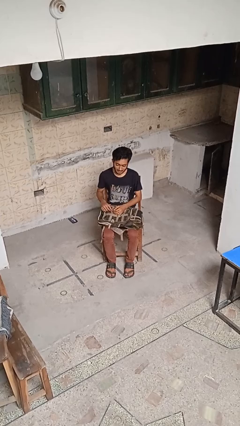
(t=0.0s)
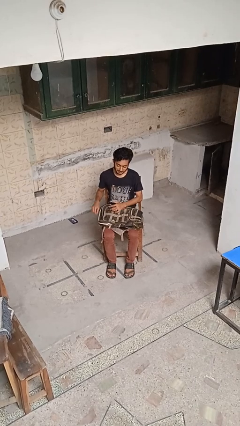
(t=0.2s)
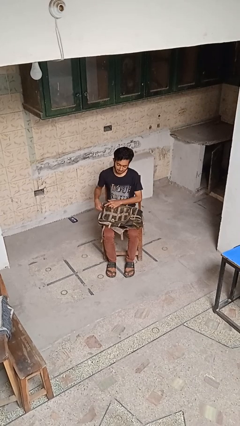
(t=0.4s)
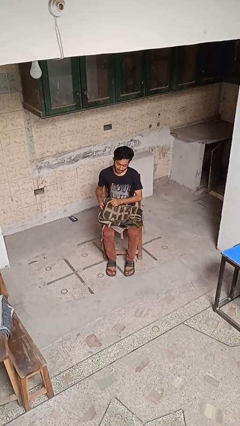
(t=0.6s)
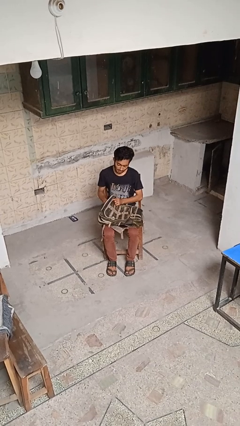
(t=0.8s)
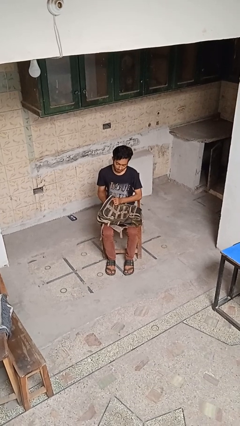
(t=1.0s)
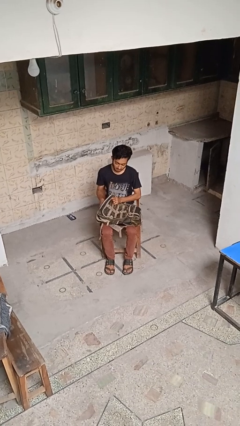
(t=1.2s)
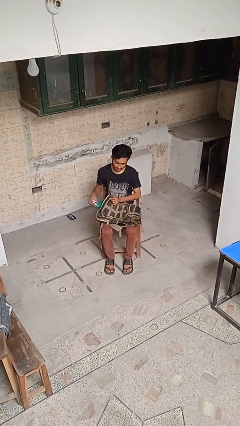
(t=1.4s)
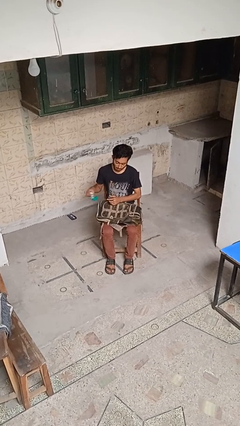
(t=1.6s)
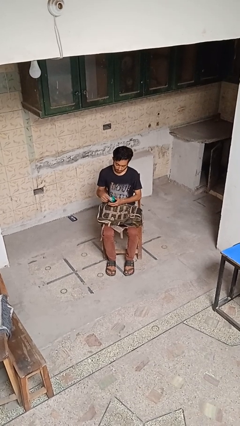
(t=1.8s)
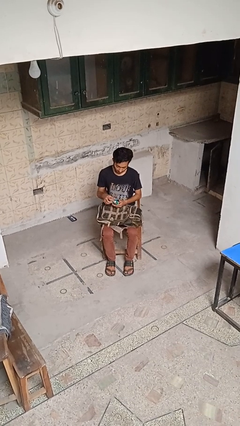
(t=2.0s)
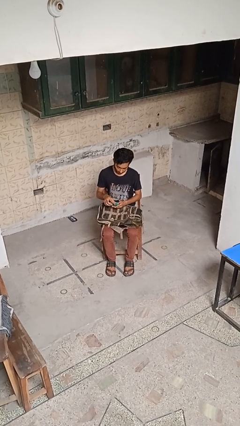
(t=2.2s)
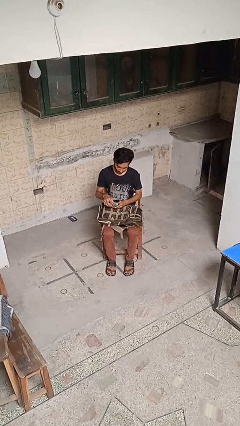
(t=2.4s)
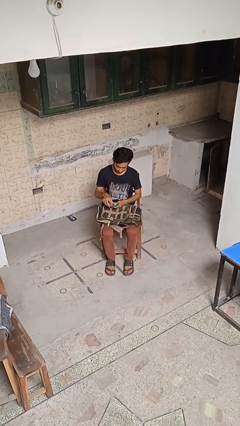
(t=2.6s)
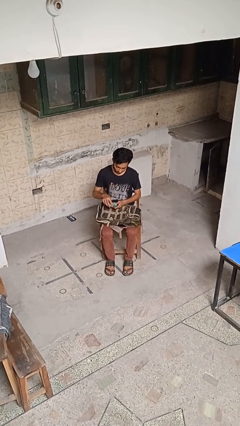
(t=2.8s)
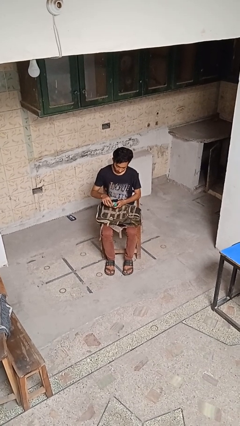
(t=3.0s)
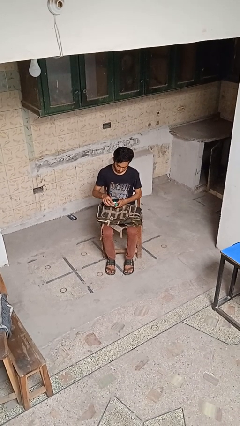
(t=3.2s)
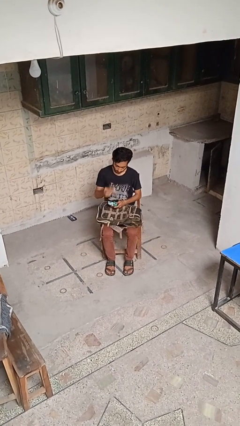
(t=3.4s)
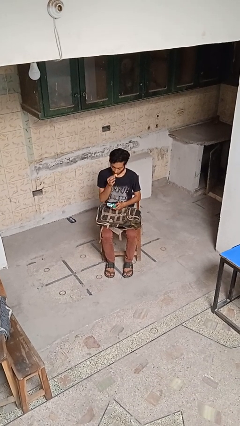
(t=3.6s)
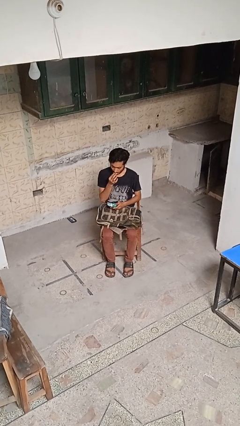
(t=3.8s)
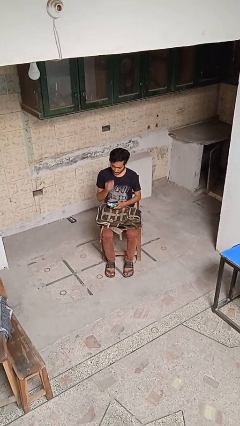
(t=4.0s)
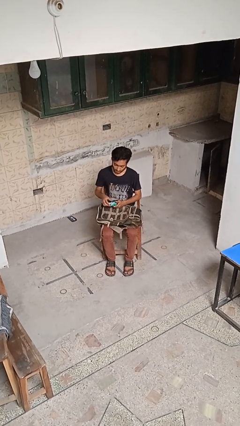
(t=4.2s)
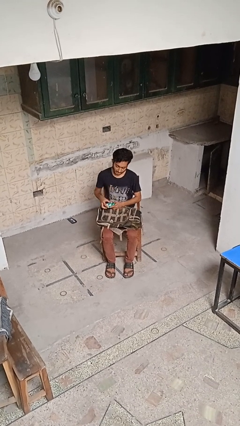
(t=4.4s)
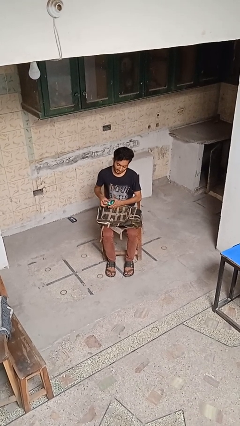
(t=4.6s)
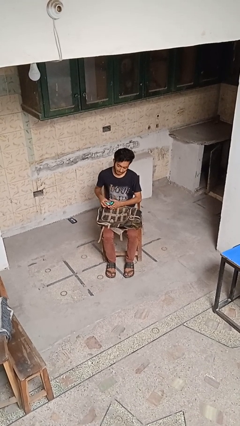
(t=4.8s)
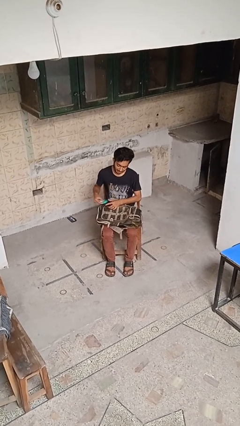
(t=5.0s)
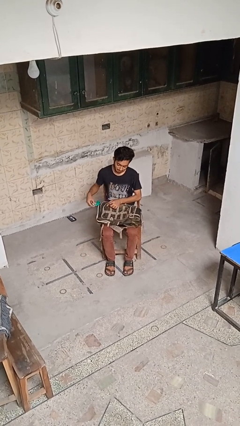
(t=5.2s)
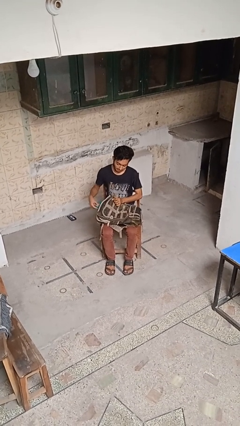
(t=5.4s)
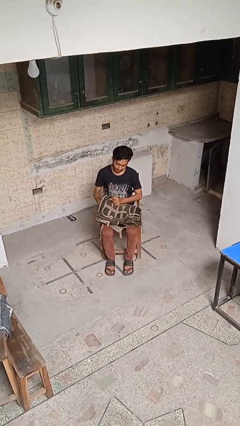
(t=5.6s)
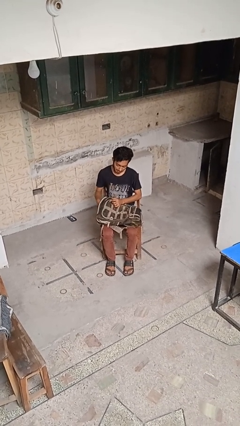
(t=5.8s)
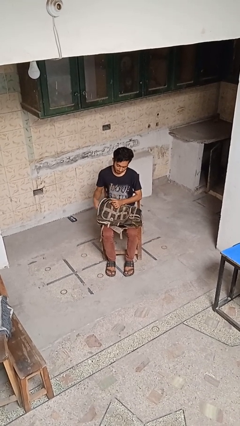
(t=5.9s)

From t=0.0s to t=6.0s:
person eats snack from bag

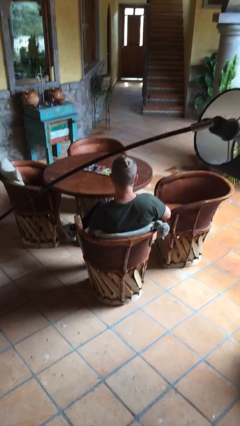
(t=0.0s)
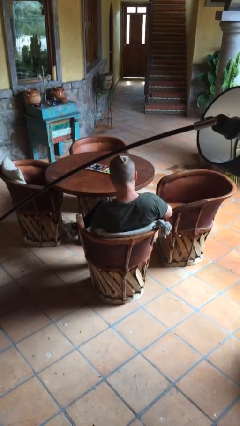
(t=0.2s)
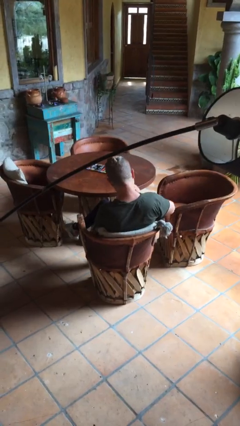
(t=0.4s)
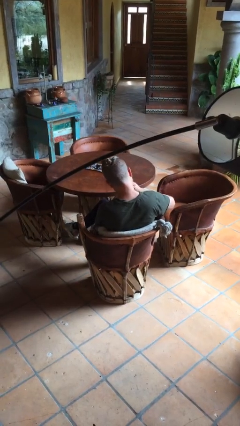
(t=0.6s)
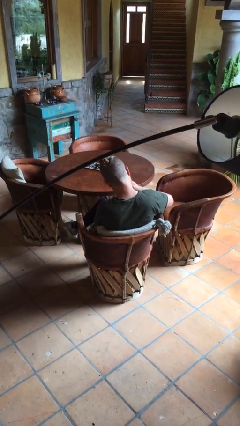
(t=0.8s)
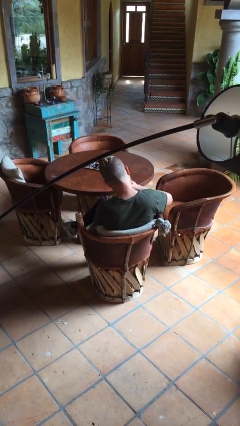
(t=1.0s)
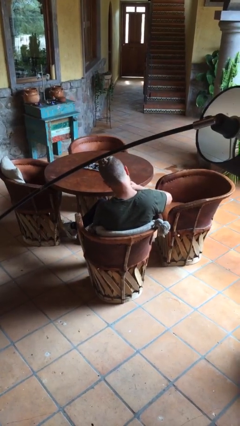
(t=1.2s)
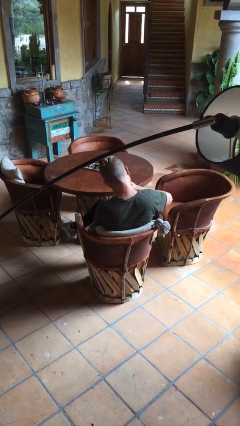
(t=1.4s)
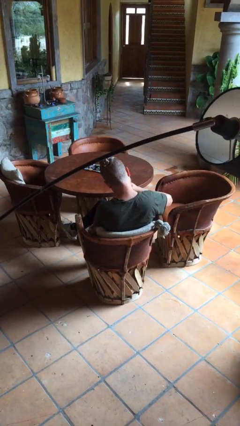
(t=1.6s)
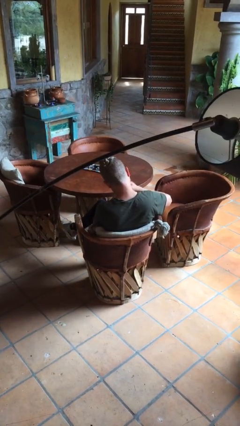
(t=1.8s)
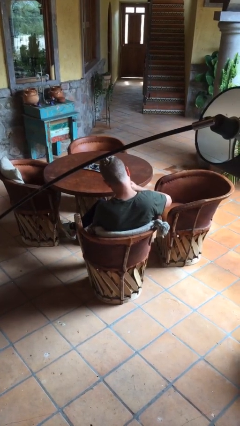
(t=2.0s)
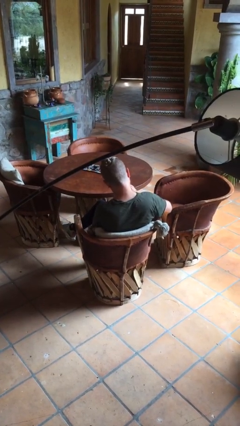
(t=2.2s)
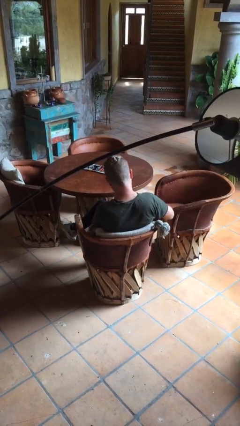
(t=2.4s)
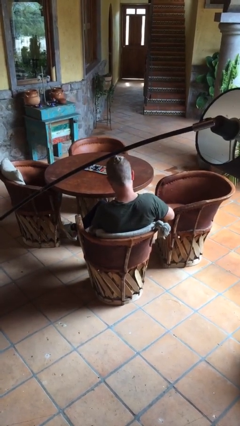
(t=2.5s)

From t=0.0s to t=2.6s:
person files fingernails

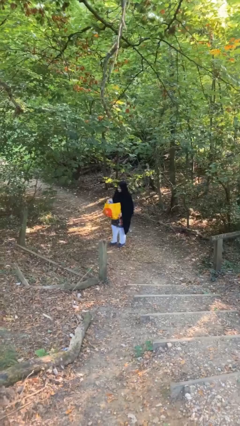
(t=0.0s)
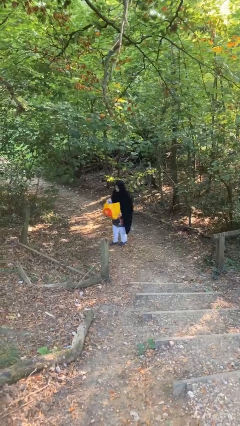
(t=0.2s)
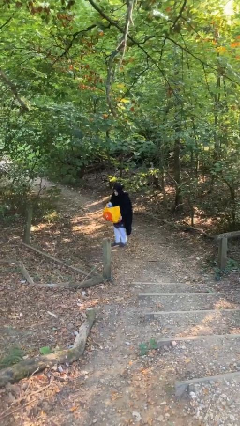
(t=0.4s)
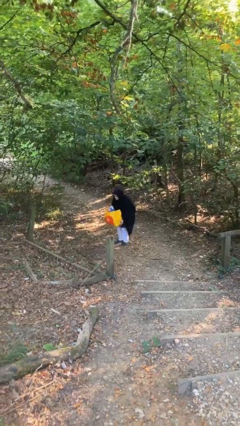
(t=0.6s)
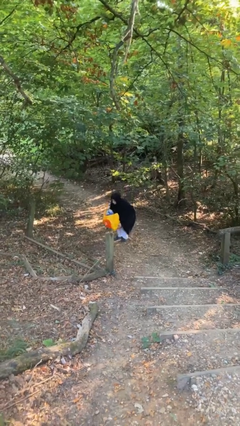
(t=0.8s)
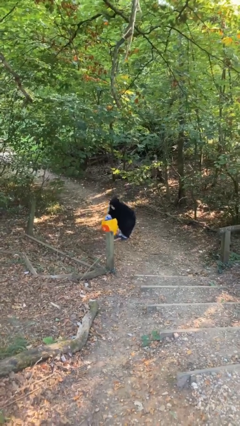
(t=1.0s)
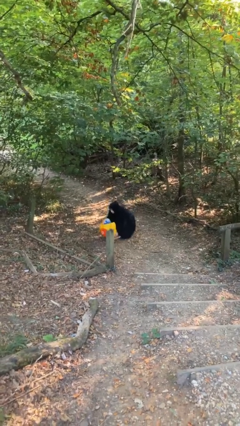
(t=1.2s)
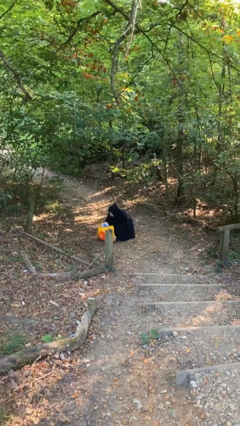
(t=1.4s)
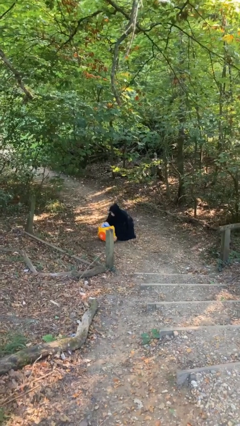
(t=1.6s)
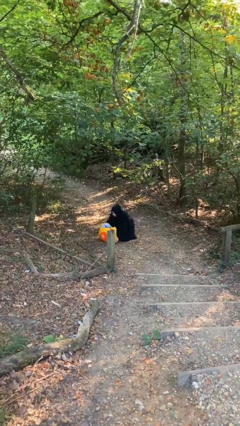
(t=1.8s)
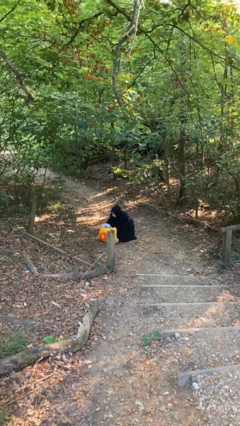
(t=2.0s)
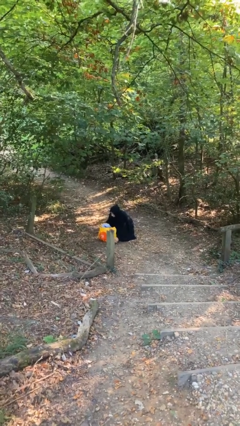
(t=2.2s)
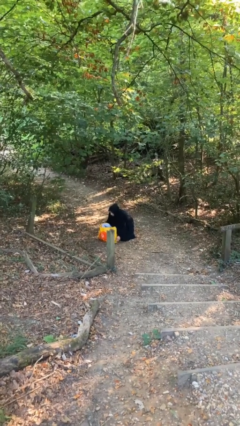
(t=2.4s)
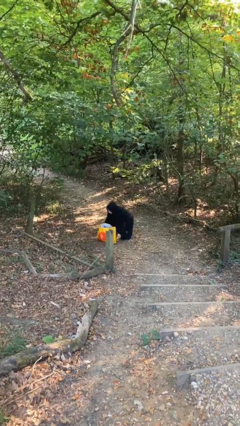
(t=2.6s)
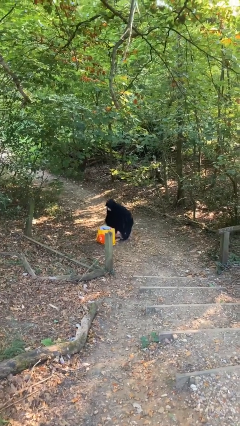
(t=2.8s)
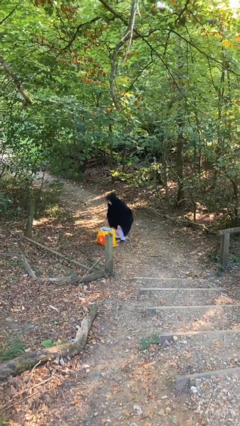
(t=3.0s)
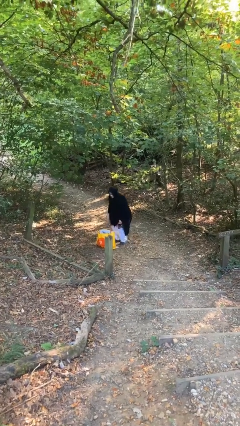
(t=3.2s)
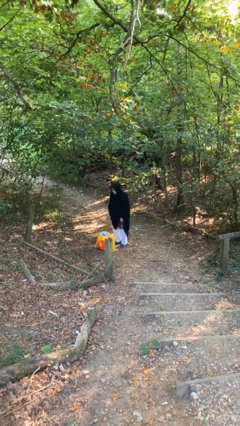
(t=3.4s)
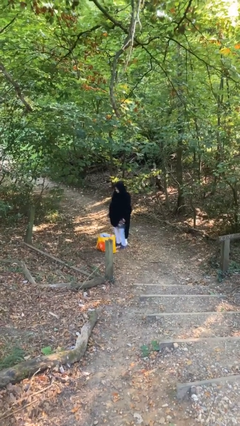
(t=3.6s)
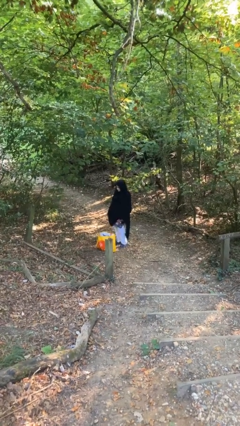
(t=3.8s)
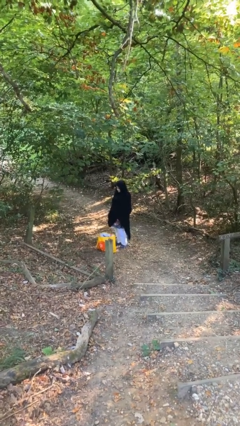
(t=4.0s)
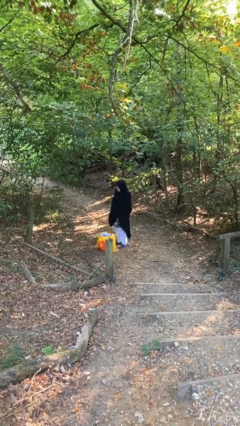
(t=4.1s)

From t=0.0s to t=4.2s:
person puts down object on floor

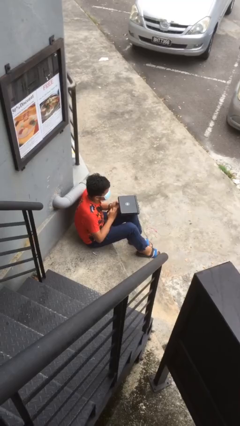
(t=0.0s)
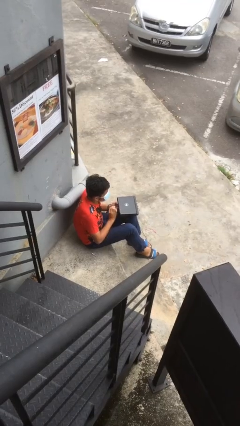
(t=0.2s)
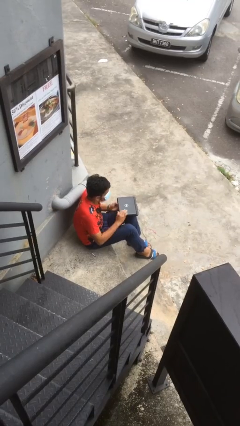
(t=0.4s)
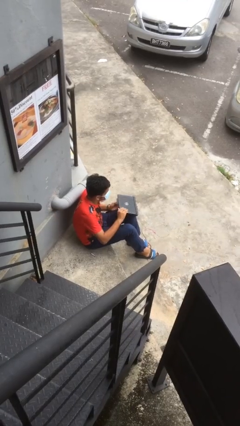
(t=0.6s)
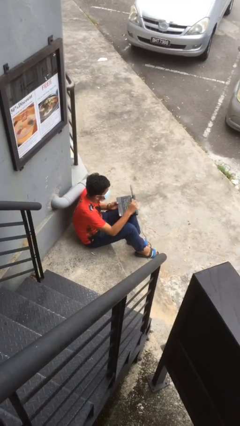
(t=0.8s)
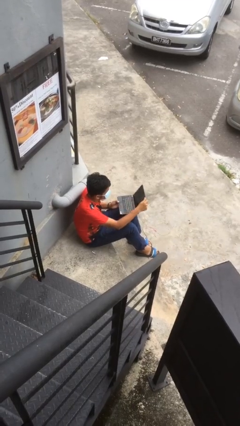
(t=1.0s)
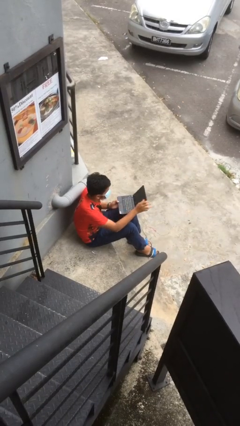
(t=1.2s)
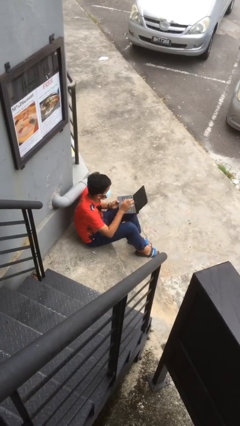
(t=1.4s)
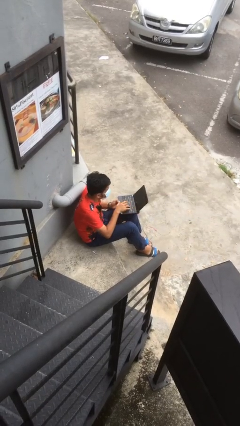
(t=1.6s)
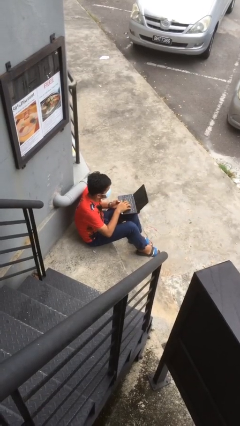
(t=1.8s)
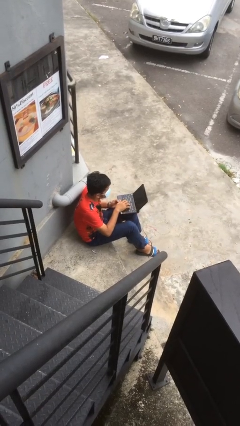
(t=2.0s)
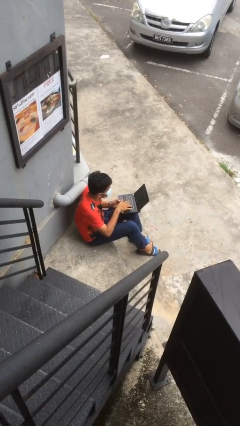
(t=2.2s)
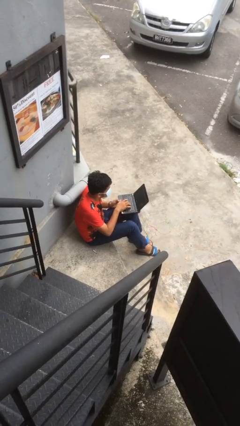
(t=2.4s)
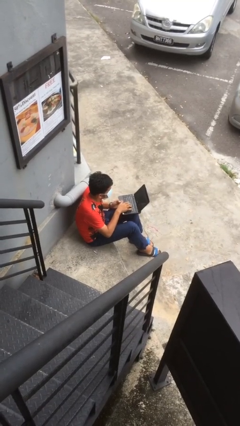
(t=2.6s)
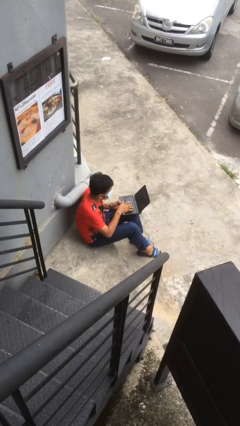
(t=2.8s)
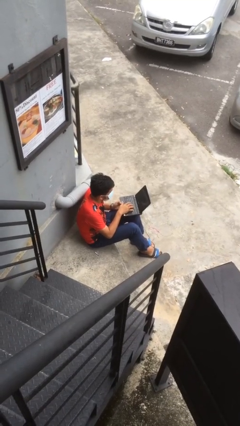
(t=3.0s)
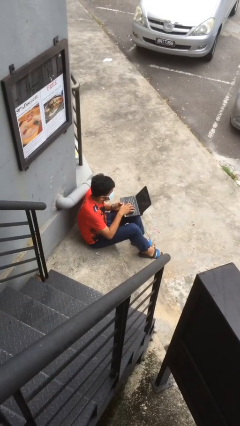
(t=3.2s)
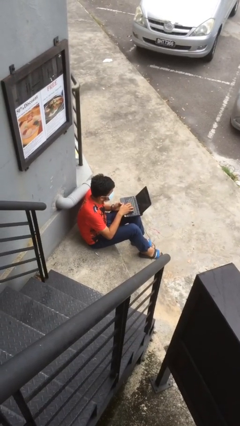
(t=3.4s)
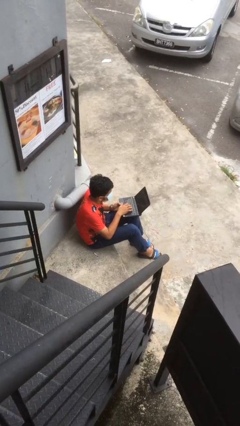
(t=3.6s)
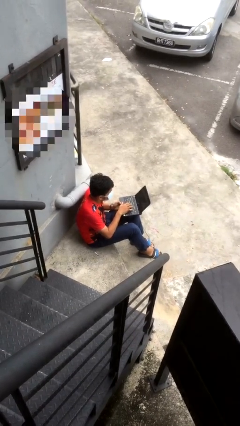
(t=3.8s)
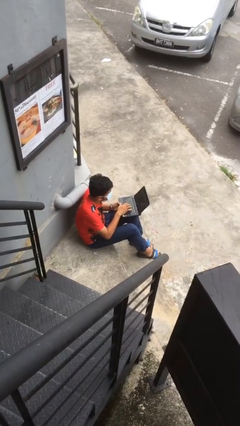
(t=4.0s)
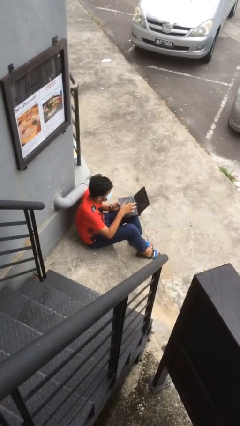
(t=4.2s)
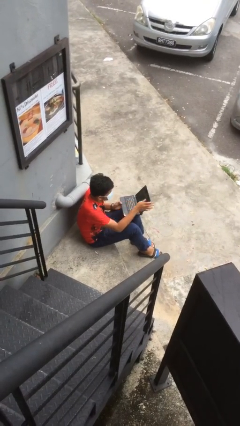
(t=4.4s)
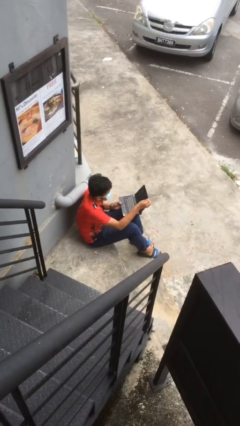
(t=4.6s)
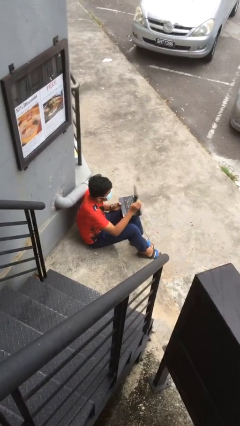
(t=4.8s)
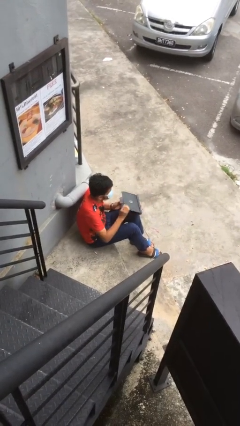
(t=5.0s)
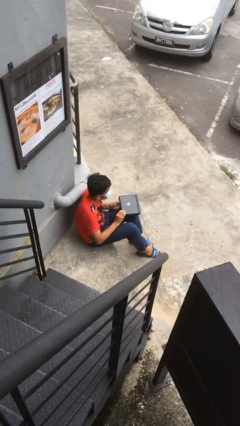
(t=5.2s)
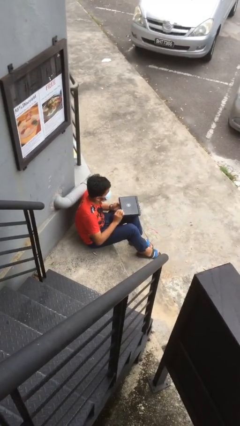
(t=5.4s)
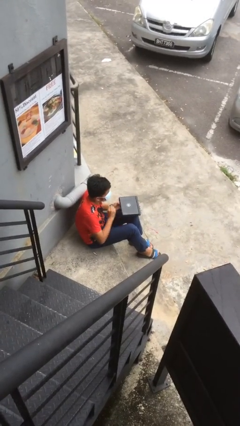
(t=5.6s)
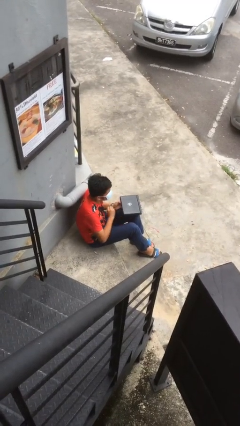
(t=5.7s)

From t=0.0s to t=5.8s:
person interacts with laptop
